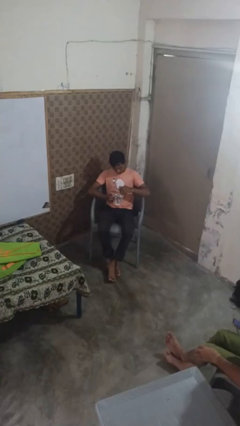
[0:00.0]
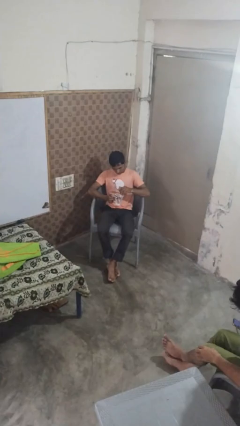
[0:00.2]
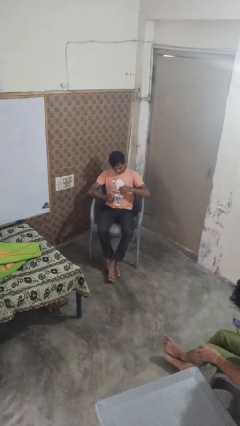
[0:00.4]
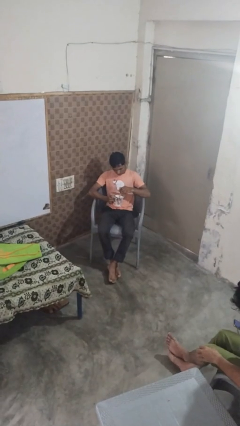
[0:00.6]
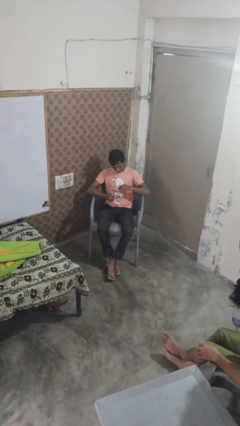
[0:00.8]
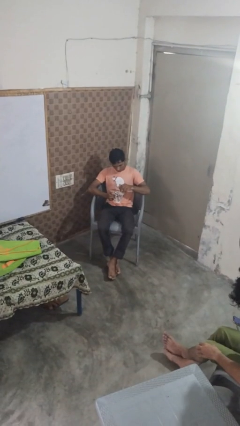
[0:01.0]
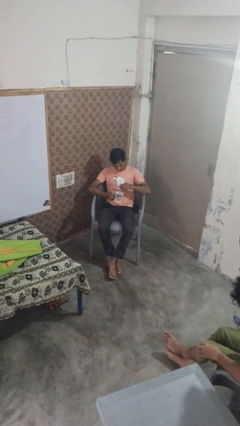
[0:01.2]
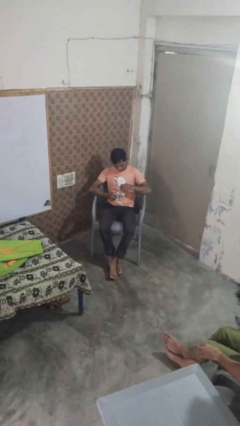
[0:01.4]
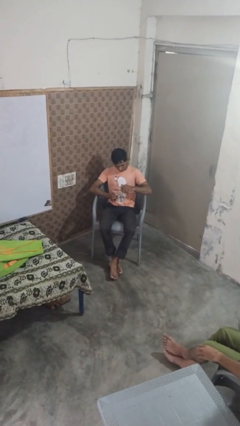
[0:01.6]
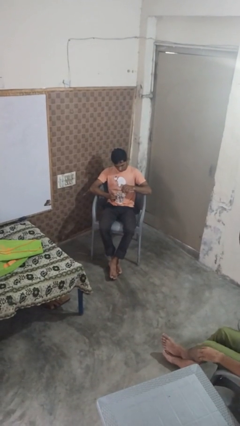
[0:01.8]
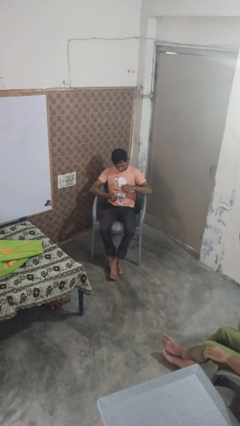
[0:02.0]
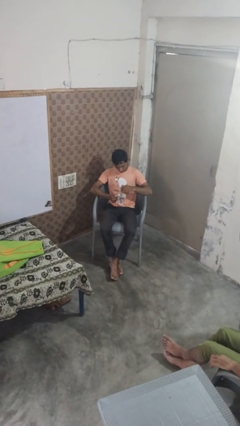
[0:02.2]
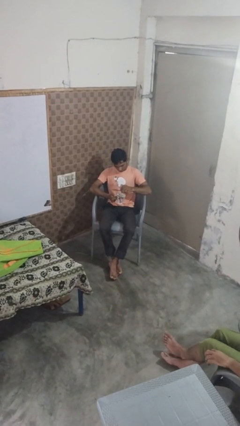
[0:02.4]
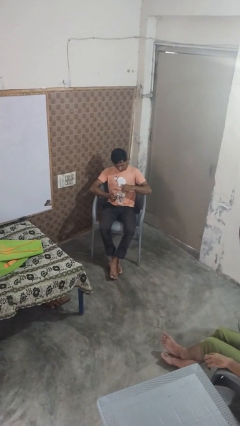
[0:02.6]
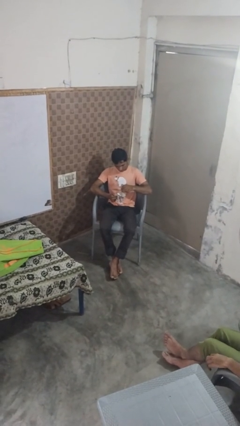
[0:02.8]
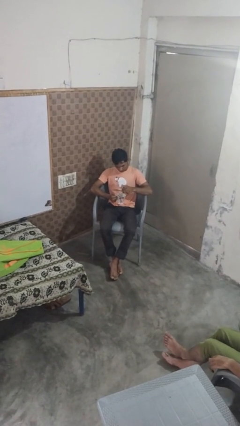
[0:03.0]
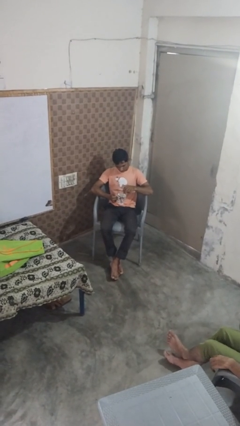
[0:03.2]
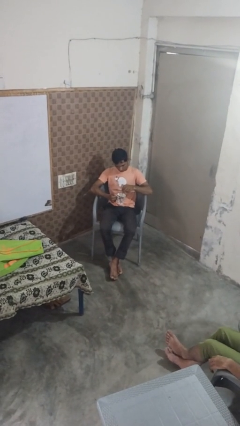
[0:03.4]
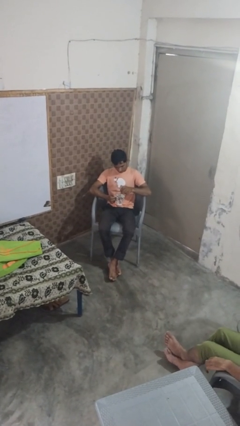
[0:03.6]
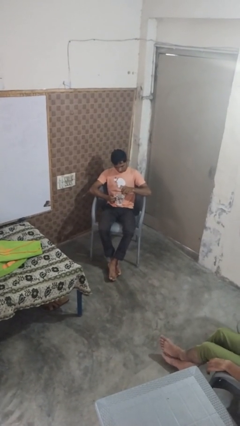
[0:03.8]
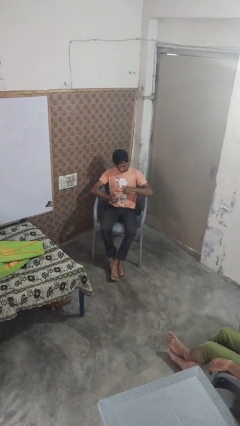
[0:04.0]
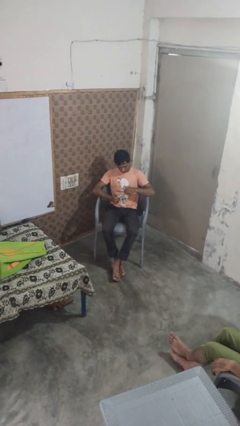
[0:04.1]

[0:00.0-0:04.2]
person stirs mug

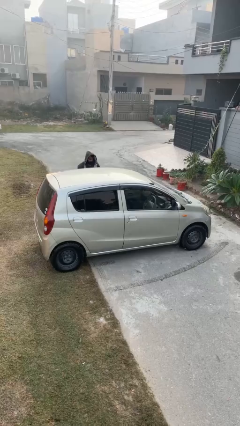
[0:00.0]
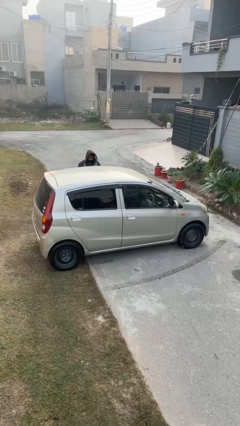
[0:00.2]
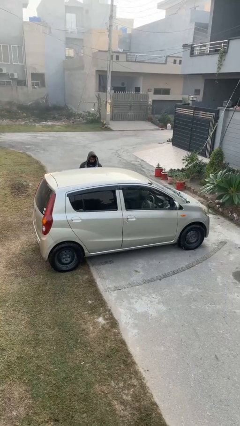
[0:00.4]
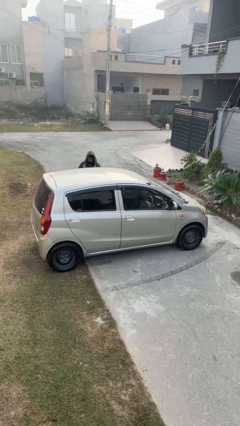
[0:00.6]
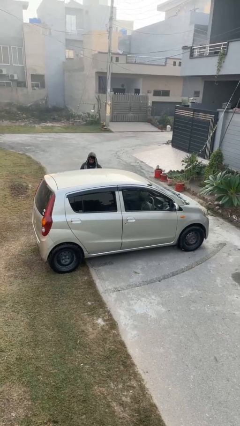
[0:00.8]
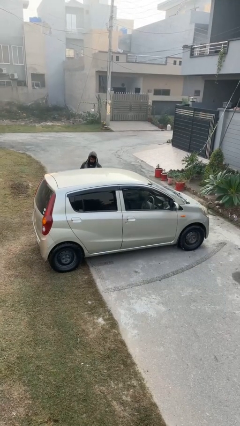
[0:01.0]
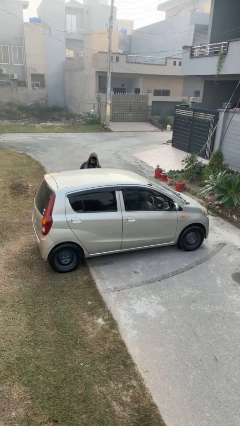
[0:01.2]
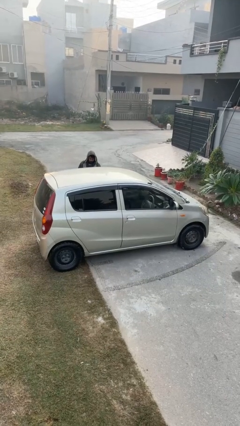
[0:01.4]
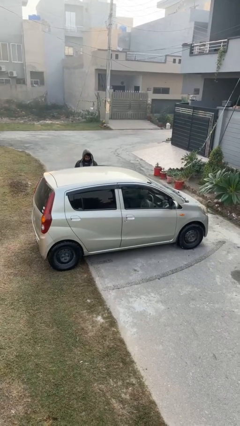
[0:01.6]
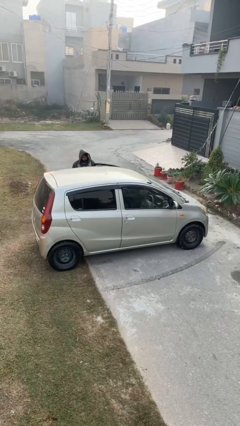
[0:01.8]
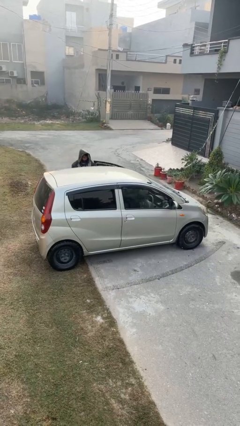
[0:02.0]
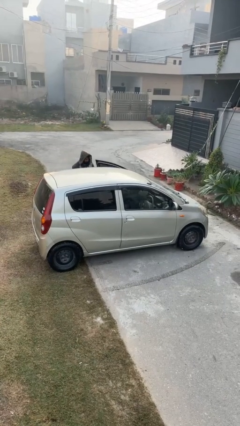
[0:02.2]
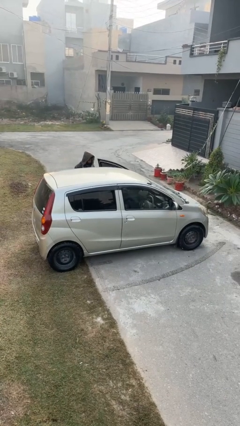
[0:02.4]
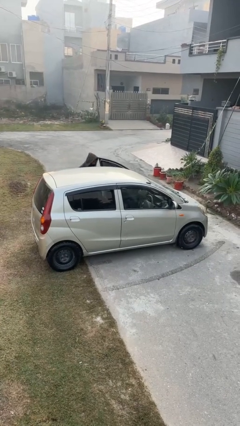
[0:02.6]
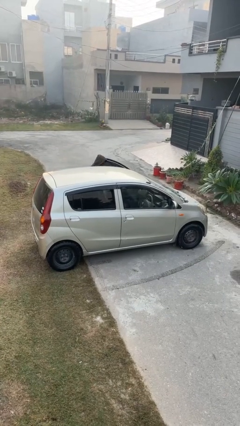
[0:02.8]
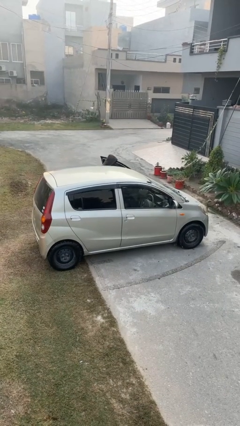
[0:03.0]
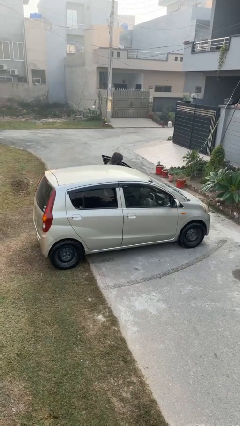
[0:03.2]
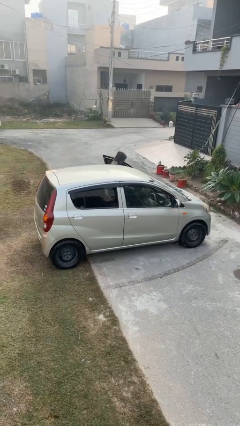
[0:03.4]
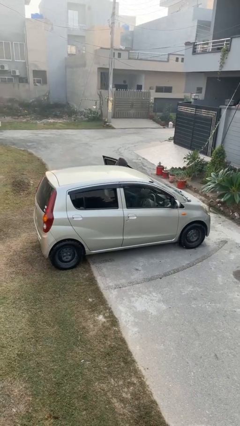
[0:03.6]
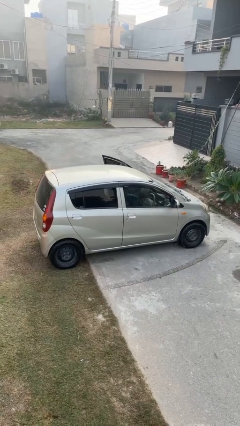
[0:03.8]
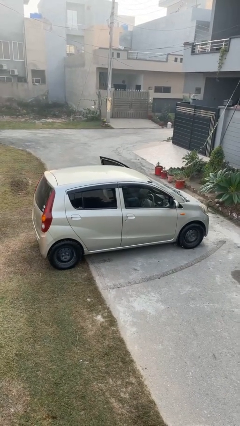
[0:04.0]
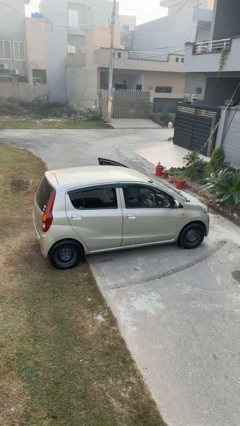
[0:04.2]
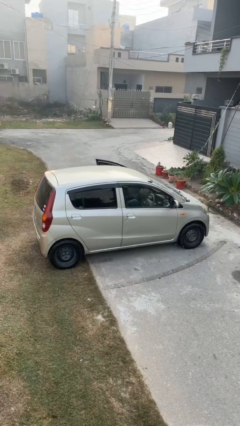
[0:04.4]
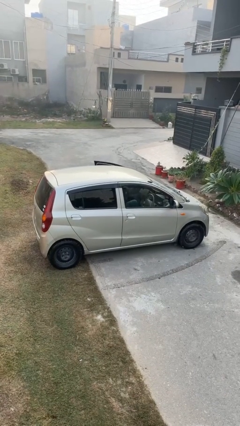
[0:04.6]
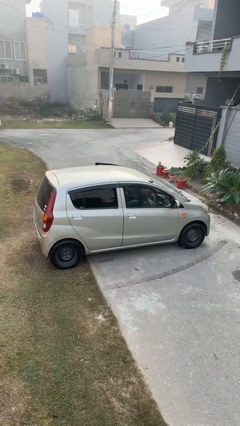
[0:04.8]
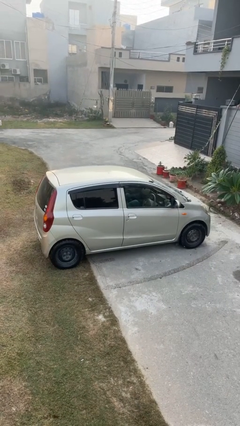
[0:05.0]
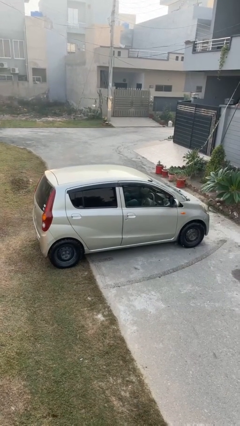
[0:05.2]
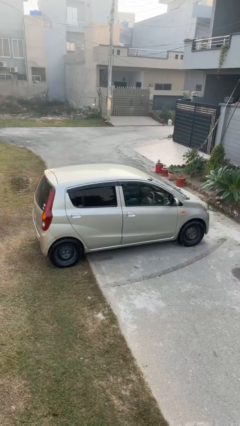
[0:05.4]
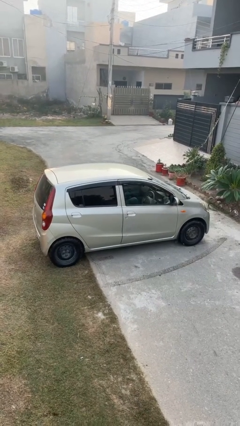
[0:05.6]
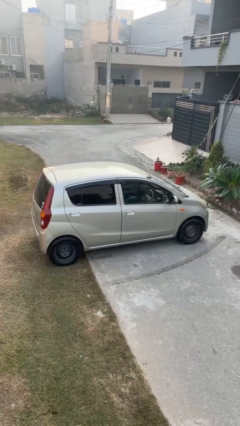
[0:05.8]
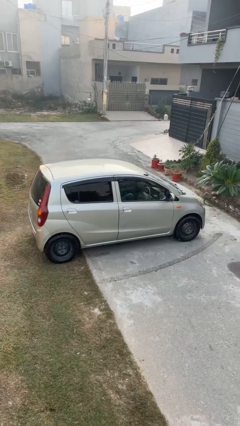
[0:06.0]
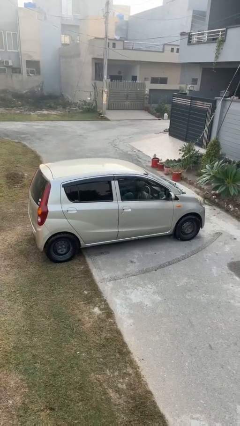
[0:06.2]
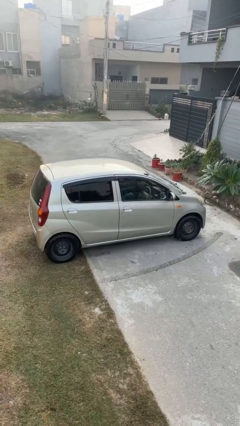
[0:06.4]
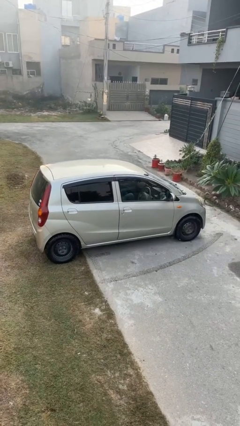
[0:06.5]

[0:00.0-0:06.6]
car picks up person

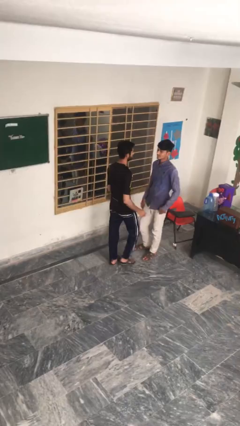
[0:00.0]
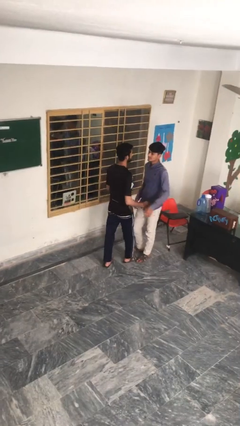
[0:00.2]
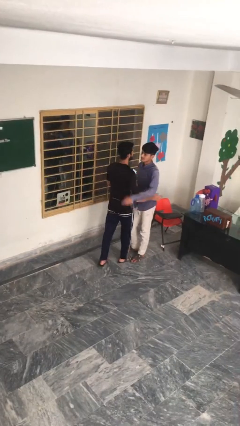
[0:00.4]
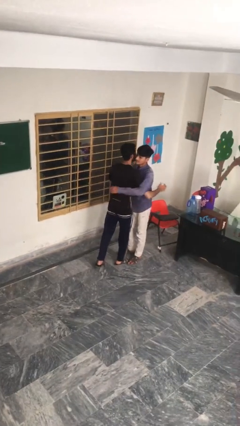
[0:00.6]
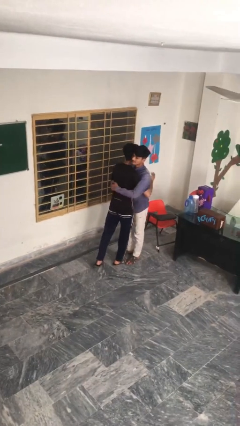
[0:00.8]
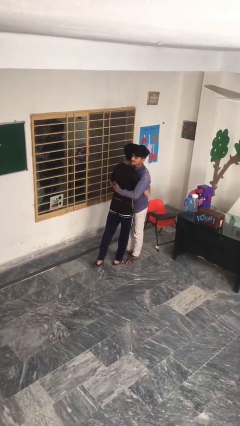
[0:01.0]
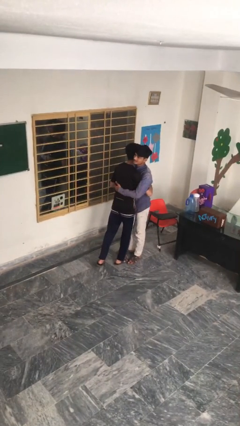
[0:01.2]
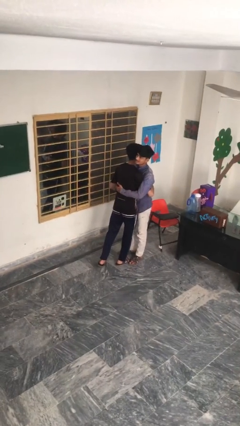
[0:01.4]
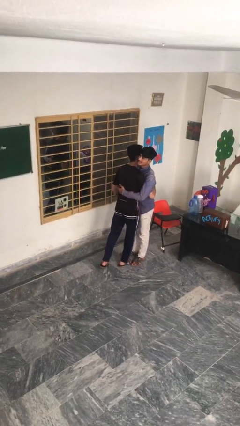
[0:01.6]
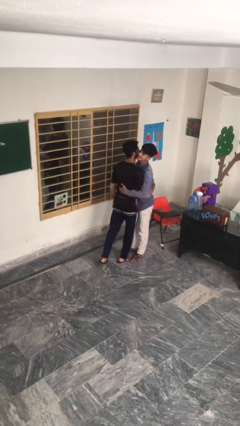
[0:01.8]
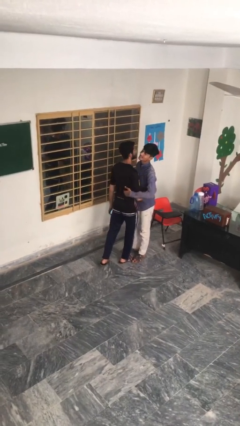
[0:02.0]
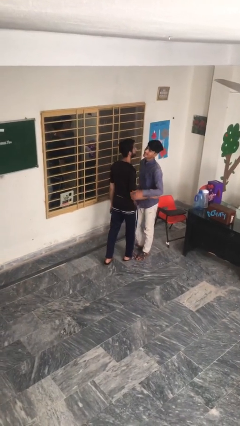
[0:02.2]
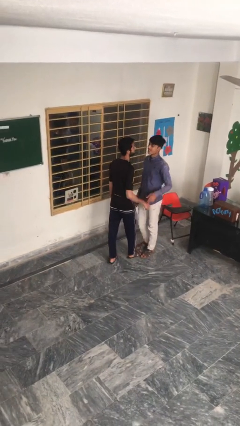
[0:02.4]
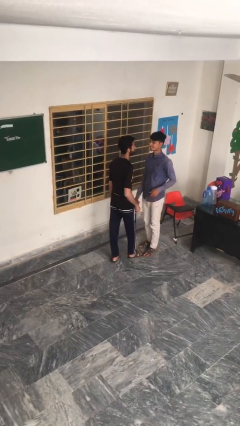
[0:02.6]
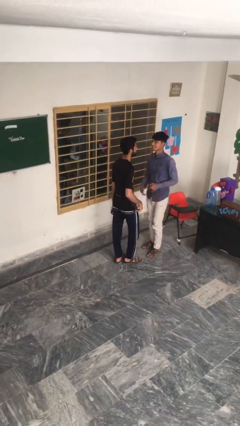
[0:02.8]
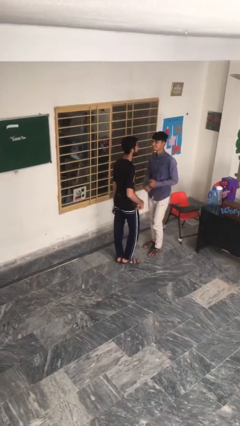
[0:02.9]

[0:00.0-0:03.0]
person embraces person

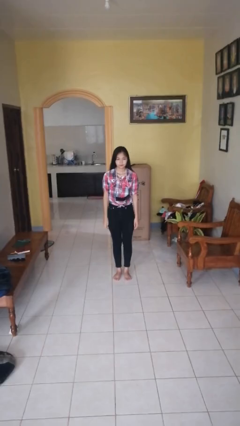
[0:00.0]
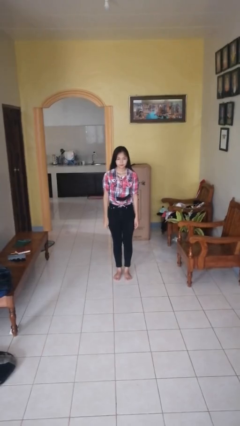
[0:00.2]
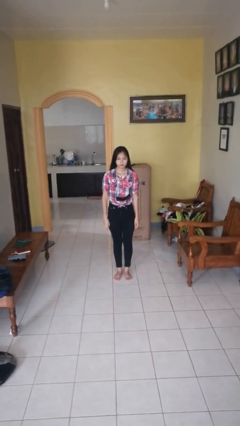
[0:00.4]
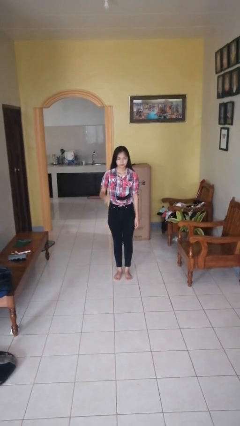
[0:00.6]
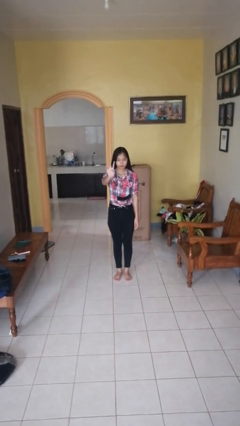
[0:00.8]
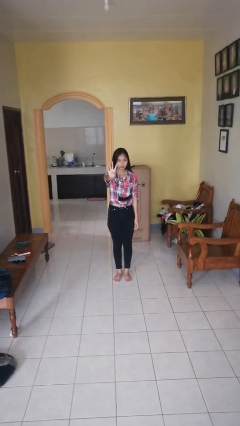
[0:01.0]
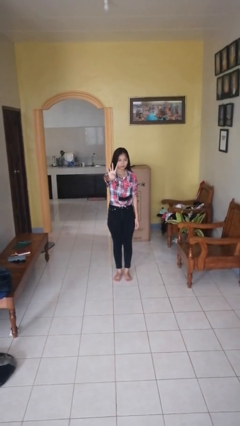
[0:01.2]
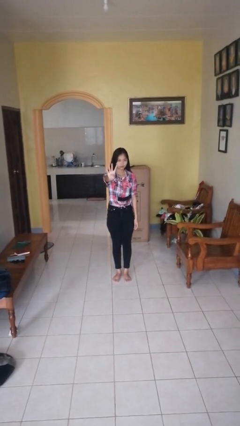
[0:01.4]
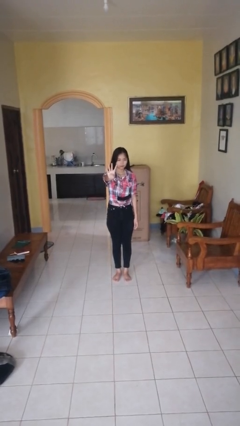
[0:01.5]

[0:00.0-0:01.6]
person gestures number four

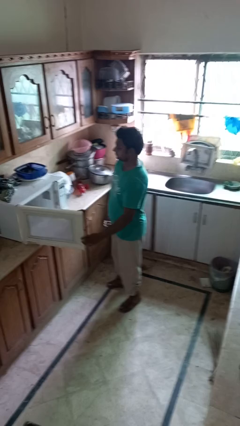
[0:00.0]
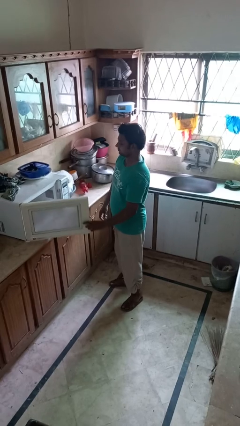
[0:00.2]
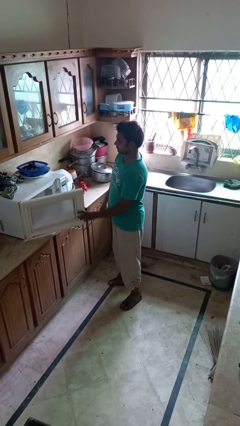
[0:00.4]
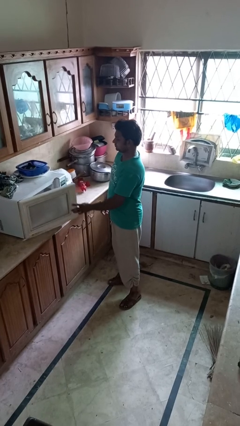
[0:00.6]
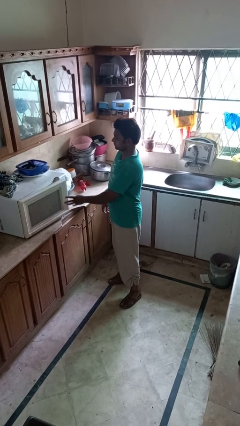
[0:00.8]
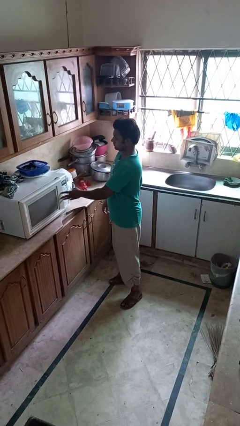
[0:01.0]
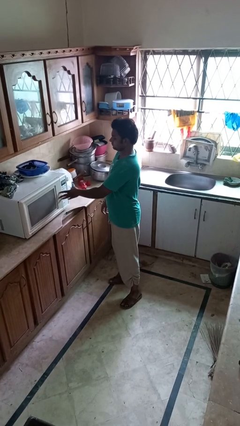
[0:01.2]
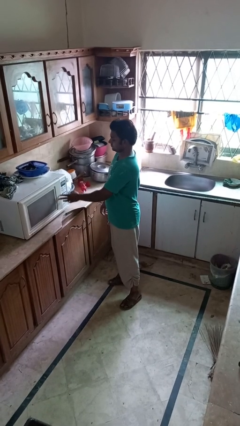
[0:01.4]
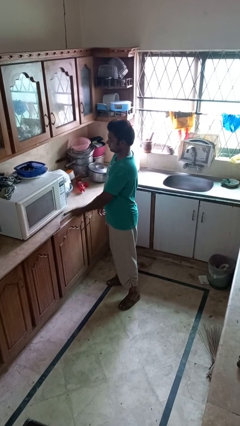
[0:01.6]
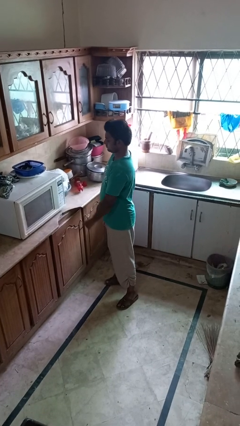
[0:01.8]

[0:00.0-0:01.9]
person closes microwave
